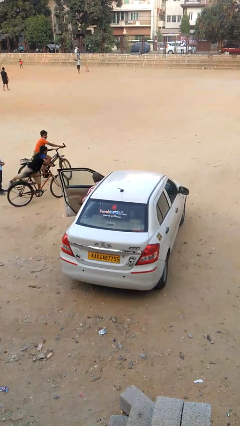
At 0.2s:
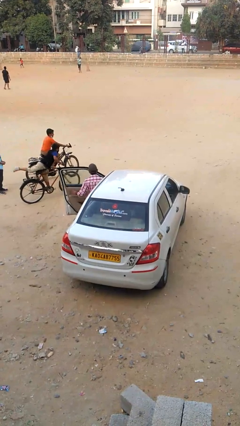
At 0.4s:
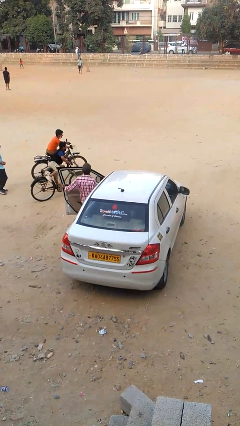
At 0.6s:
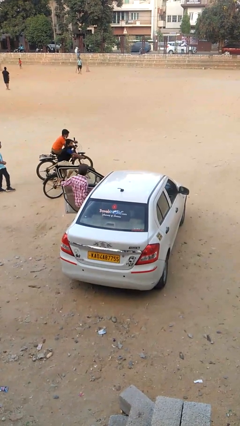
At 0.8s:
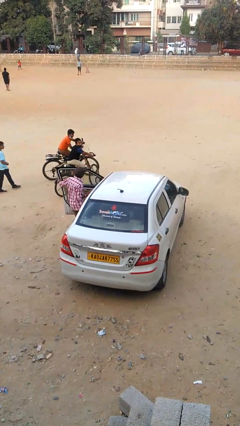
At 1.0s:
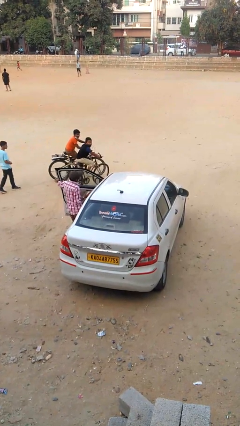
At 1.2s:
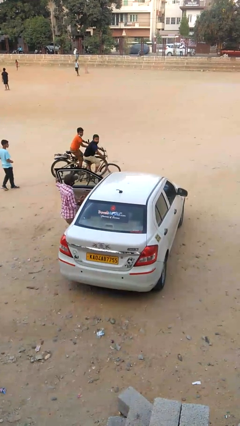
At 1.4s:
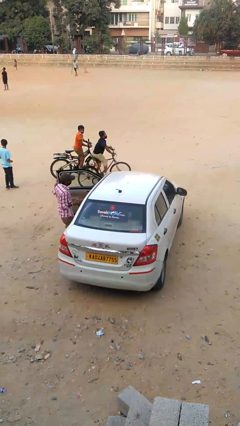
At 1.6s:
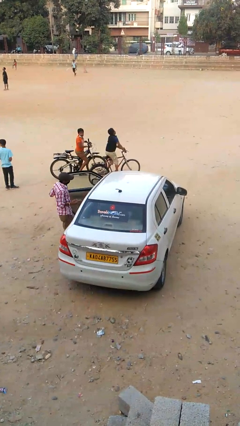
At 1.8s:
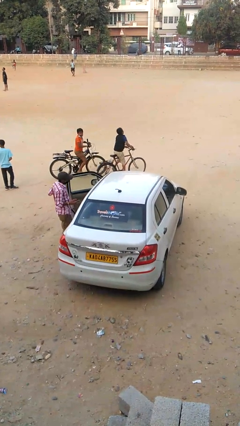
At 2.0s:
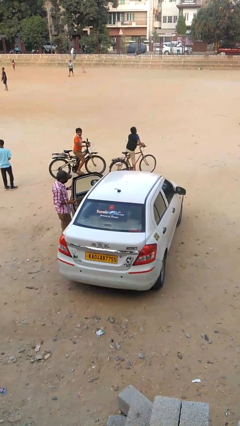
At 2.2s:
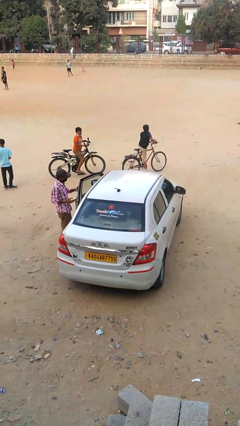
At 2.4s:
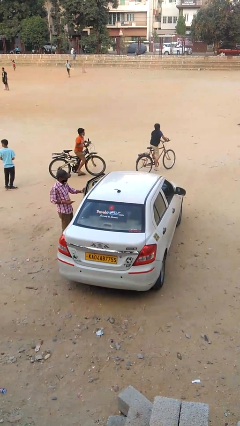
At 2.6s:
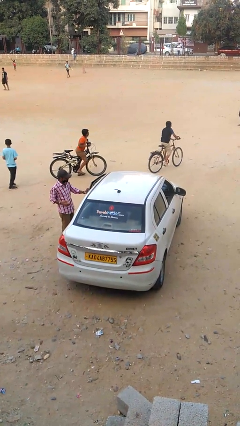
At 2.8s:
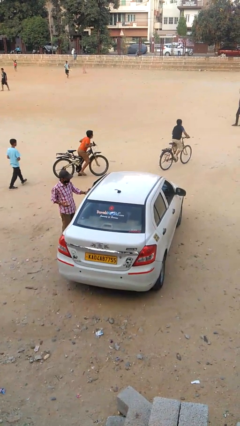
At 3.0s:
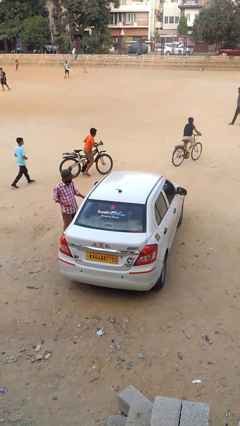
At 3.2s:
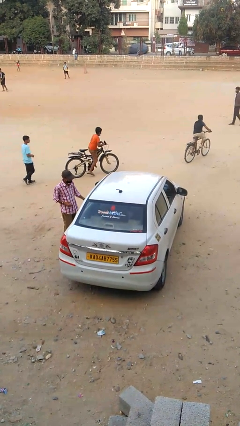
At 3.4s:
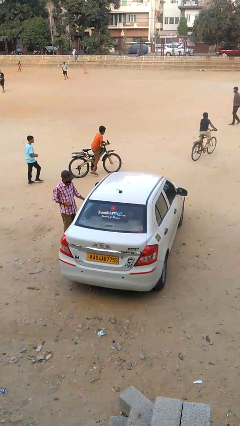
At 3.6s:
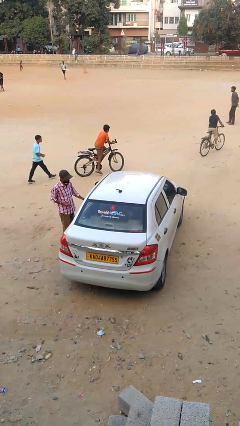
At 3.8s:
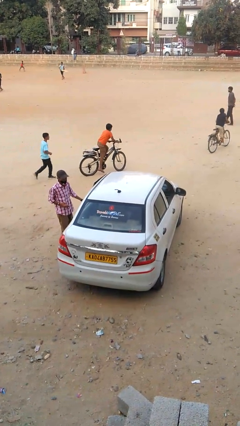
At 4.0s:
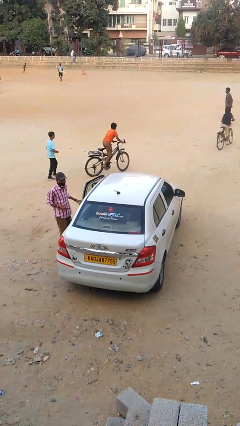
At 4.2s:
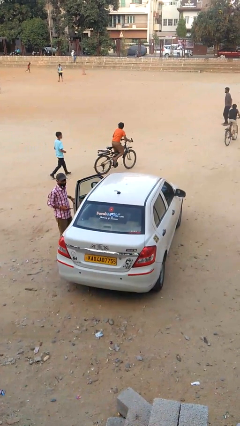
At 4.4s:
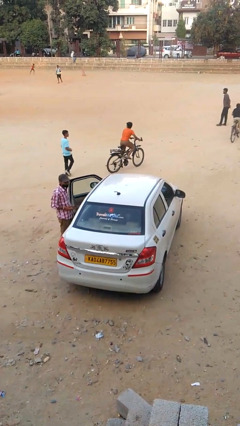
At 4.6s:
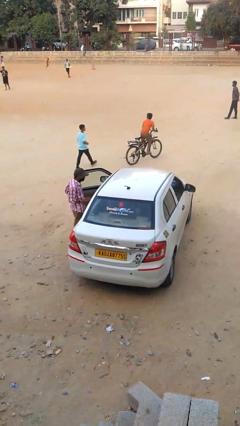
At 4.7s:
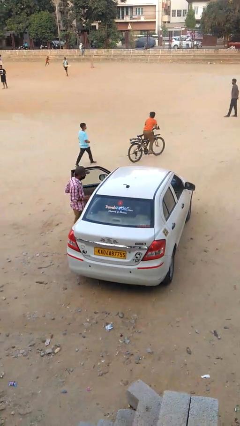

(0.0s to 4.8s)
car drops off person

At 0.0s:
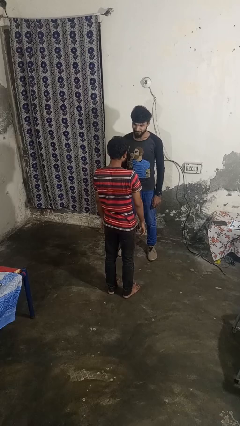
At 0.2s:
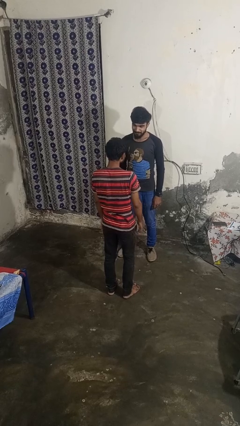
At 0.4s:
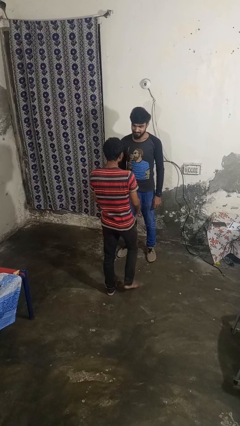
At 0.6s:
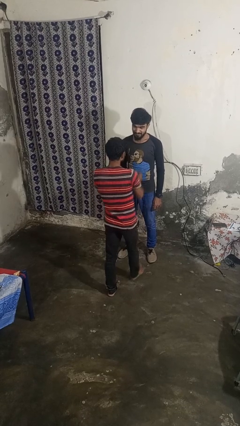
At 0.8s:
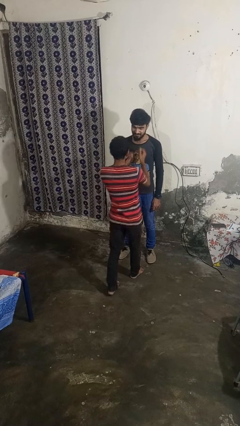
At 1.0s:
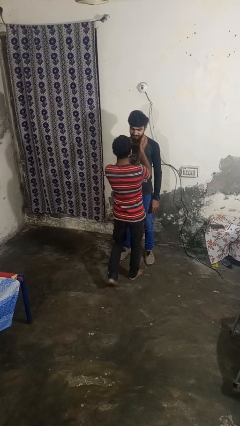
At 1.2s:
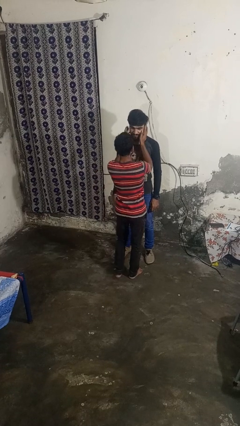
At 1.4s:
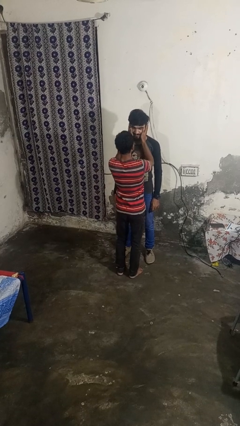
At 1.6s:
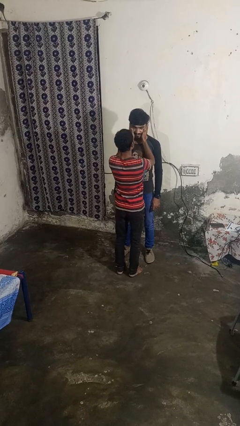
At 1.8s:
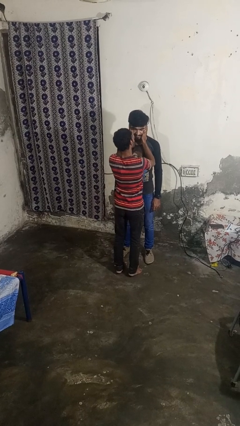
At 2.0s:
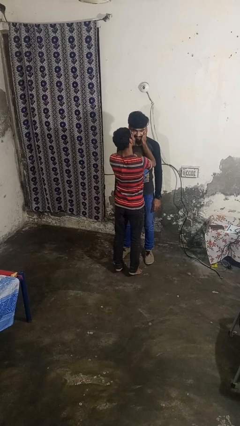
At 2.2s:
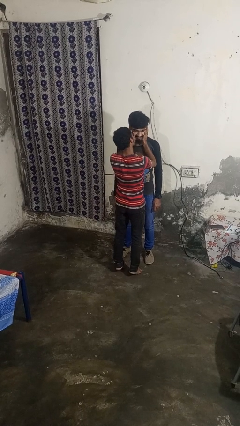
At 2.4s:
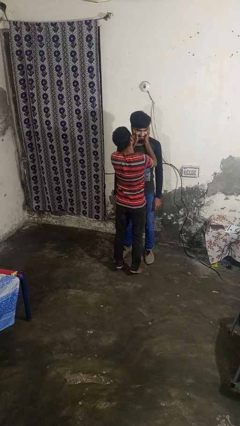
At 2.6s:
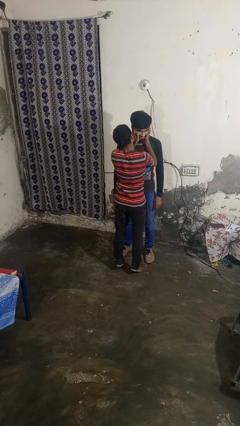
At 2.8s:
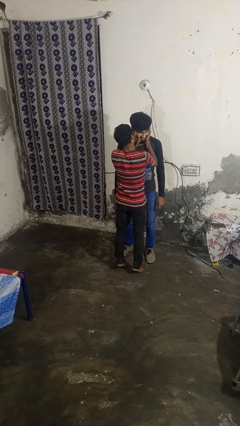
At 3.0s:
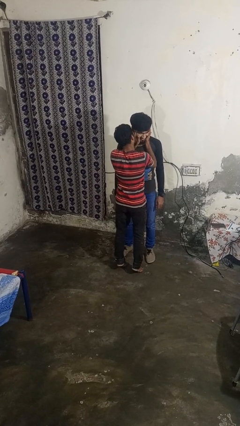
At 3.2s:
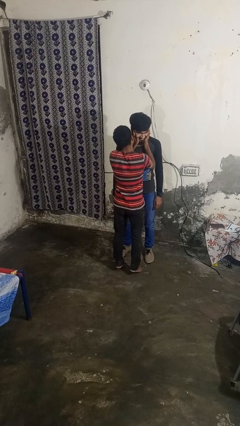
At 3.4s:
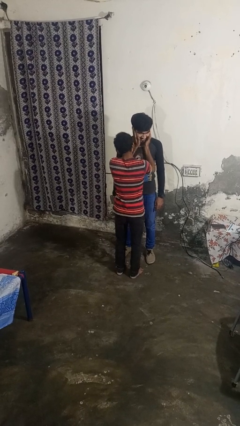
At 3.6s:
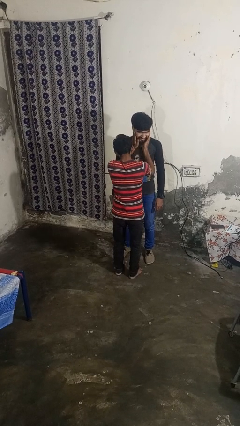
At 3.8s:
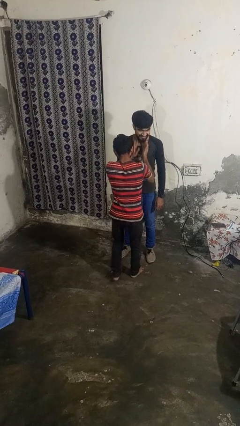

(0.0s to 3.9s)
person kisses cheek of person

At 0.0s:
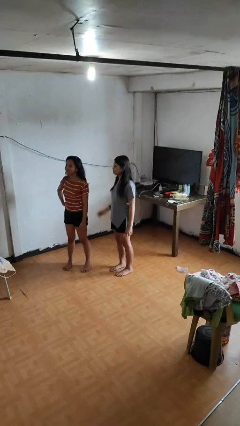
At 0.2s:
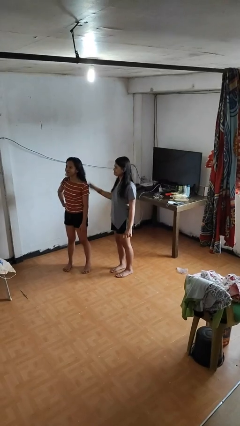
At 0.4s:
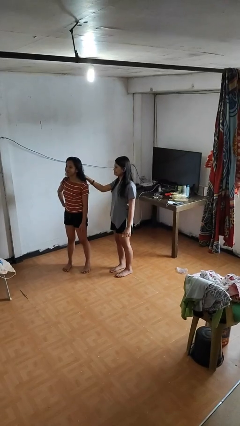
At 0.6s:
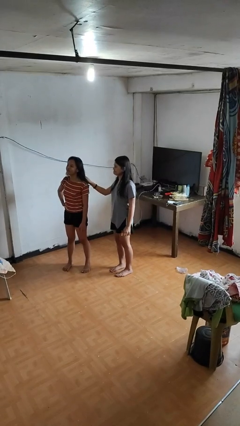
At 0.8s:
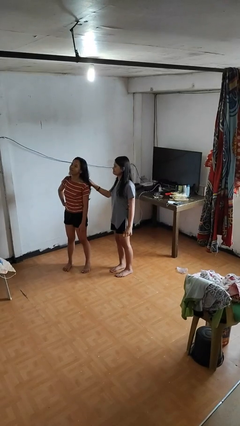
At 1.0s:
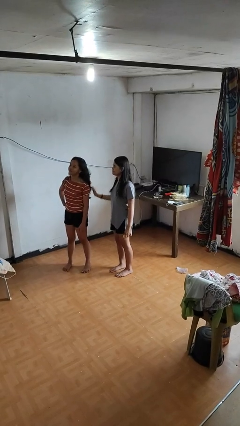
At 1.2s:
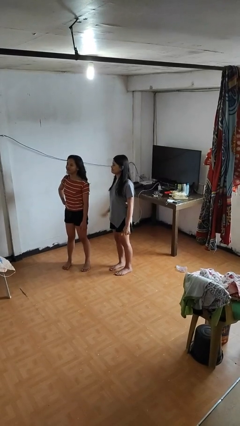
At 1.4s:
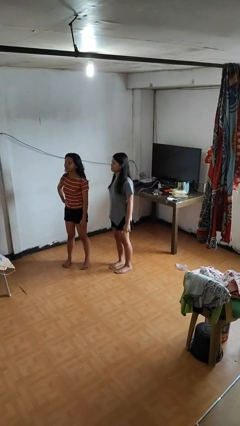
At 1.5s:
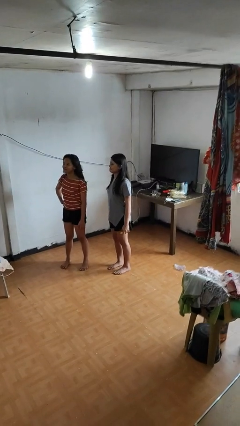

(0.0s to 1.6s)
person grabs person by hair

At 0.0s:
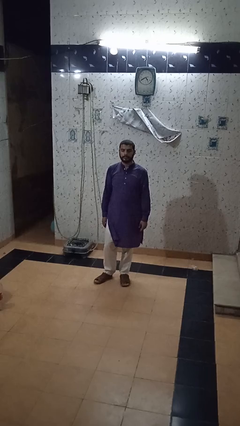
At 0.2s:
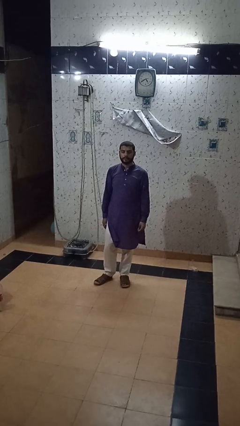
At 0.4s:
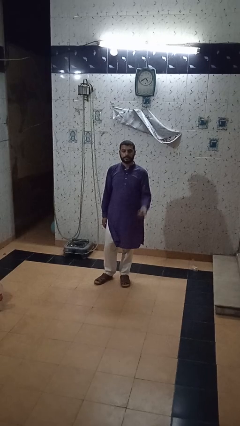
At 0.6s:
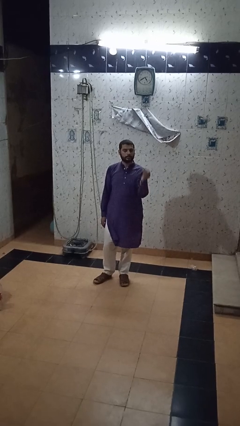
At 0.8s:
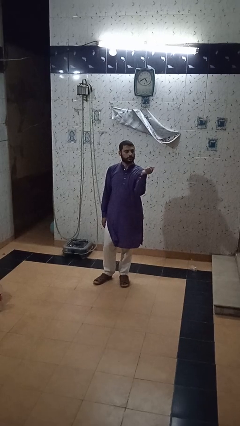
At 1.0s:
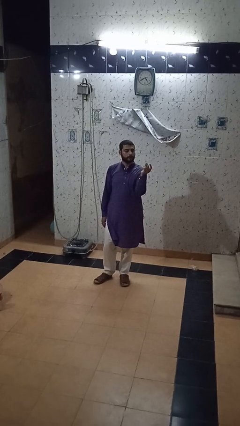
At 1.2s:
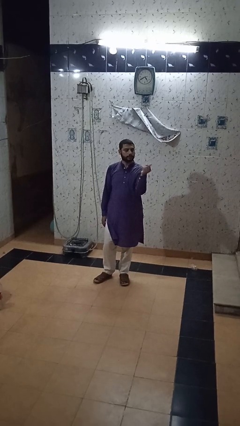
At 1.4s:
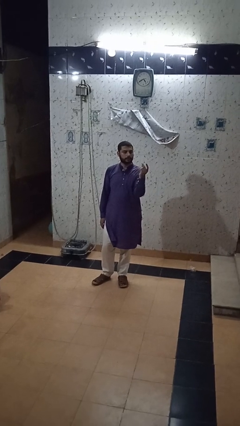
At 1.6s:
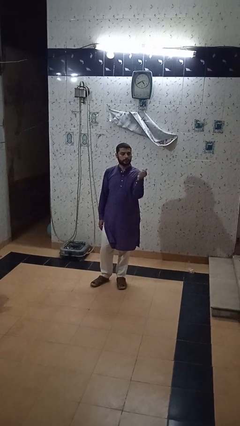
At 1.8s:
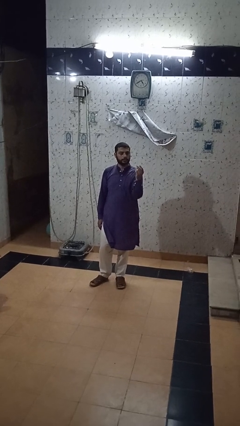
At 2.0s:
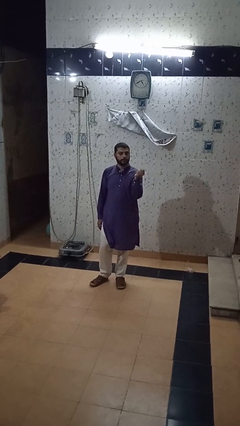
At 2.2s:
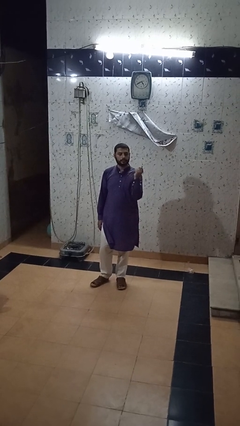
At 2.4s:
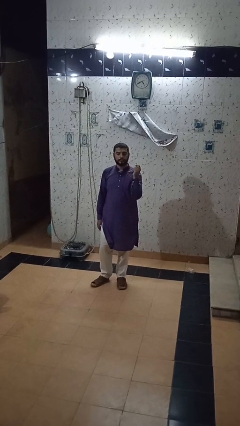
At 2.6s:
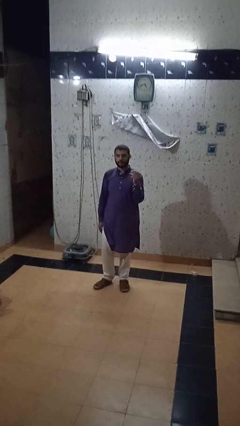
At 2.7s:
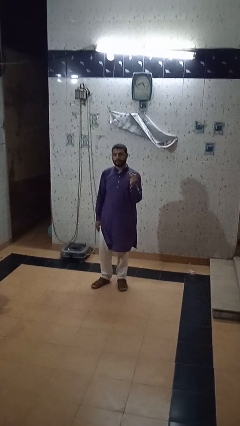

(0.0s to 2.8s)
person snaps fingers

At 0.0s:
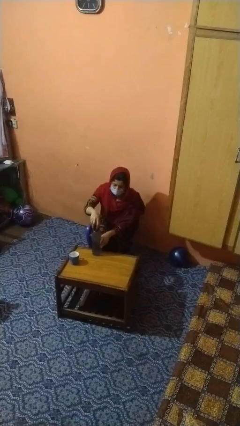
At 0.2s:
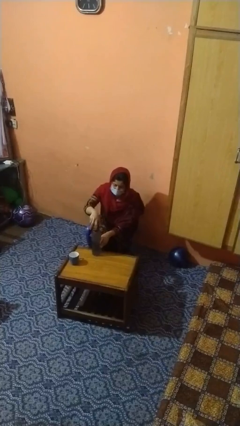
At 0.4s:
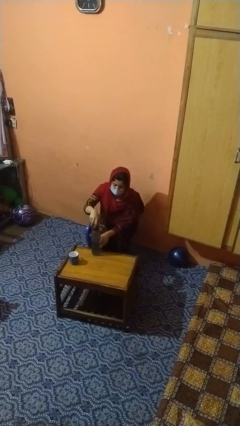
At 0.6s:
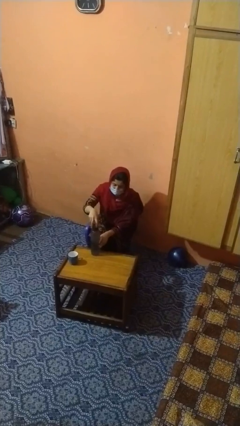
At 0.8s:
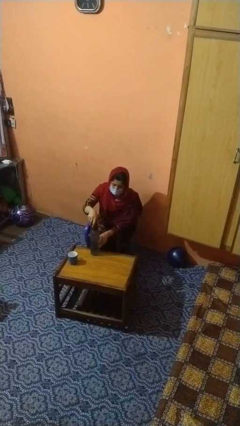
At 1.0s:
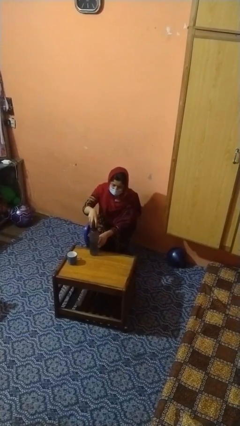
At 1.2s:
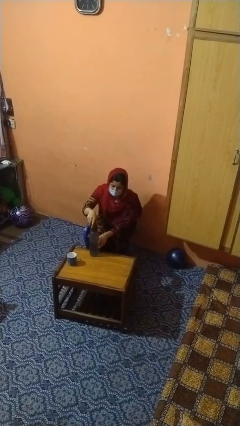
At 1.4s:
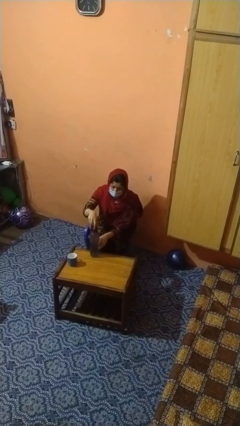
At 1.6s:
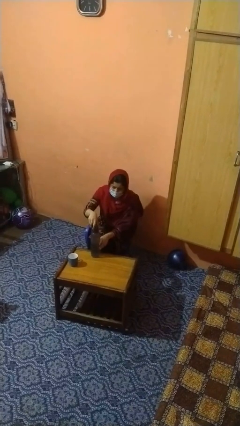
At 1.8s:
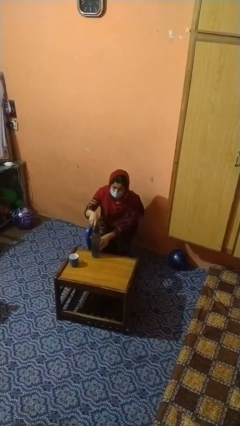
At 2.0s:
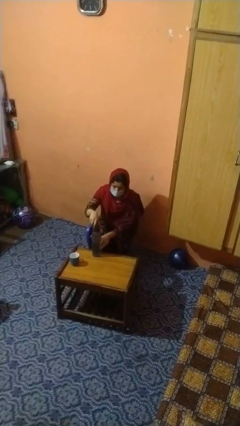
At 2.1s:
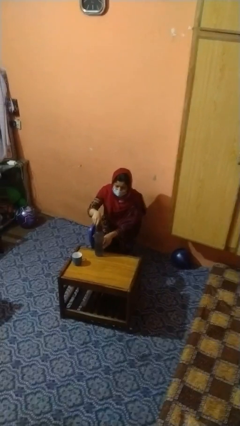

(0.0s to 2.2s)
person screws lid to bottle

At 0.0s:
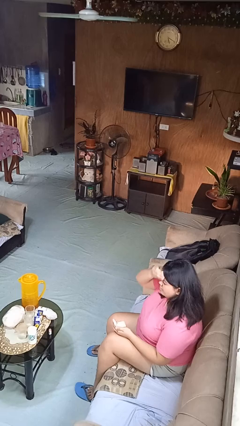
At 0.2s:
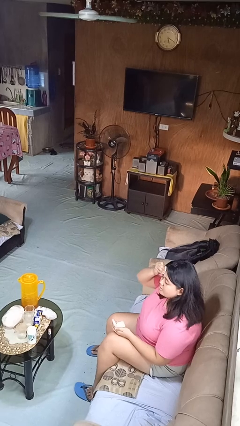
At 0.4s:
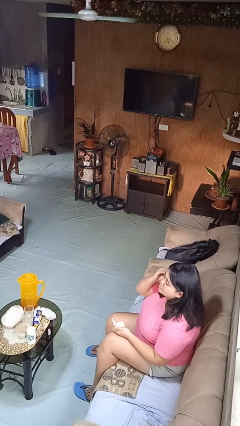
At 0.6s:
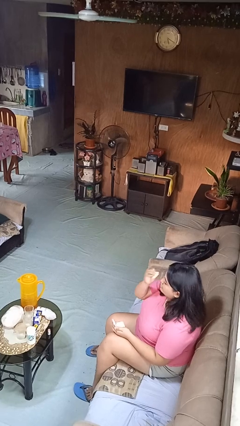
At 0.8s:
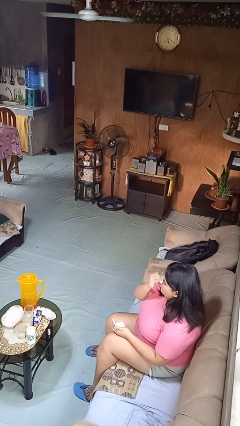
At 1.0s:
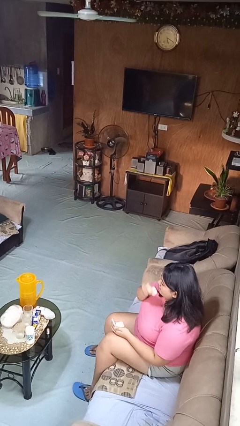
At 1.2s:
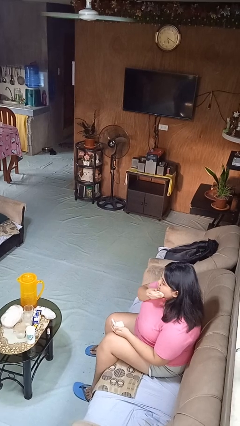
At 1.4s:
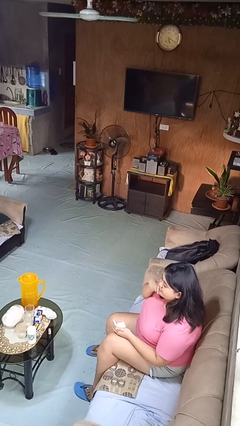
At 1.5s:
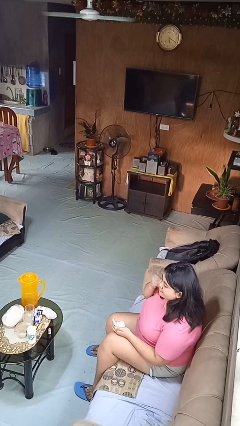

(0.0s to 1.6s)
person applies foundation makeup

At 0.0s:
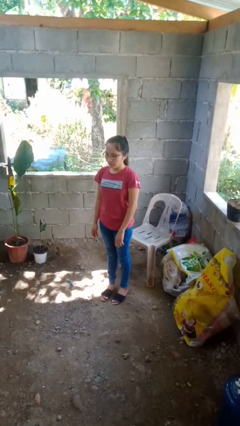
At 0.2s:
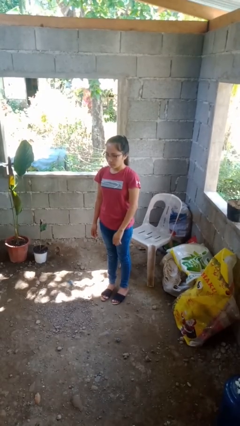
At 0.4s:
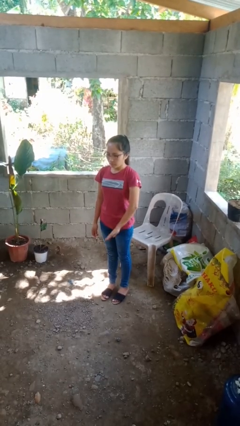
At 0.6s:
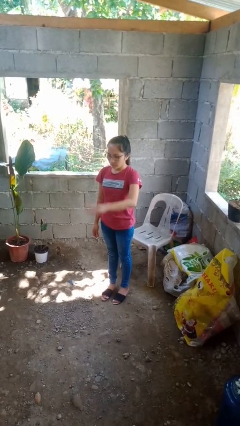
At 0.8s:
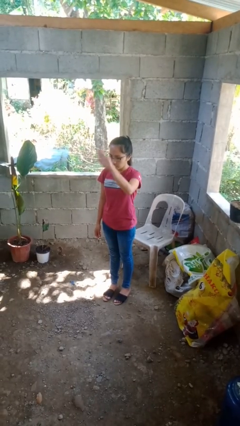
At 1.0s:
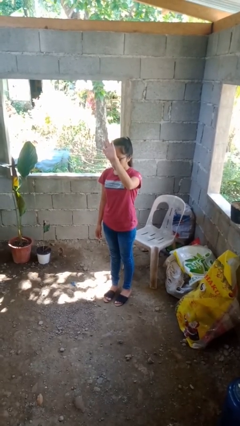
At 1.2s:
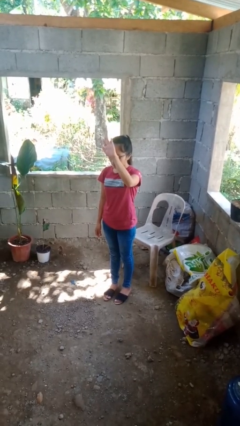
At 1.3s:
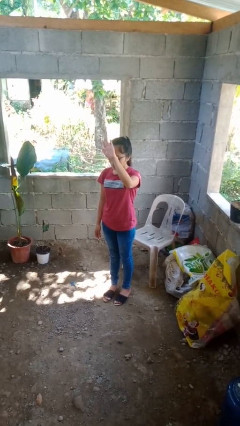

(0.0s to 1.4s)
person gestures swipe up
